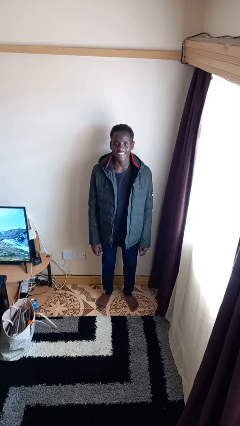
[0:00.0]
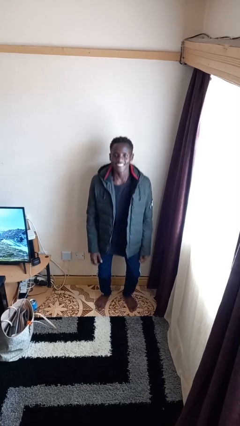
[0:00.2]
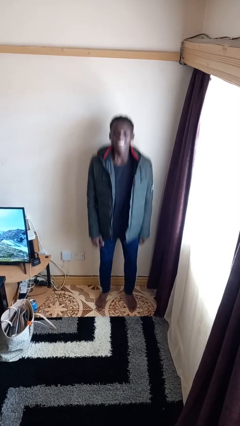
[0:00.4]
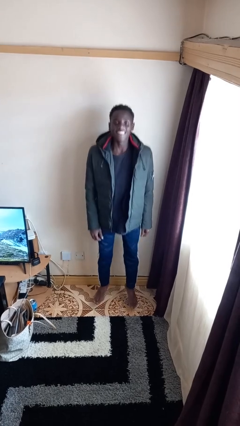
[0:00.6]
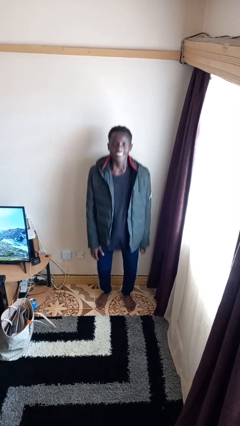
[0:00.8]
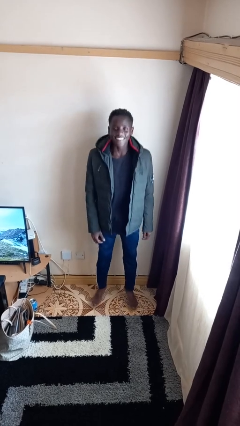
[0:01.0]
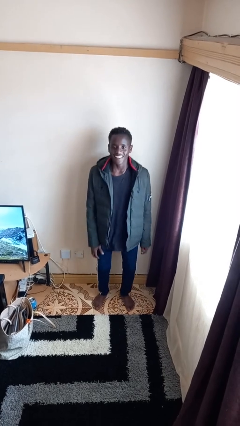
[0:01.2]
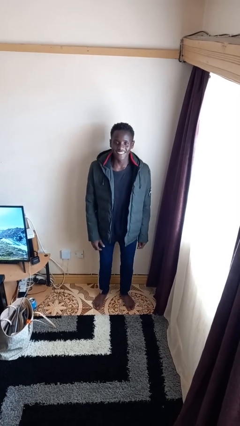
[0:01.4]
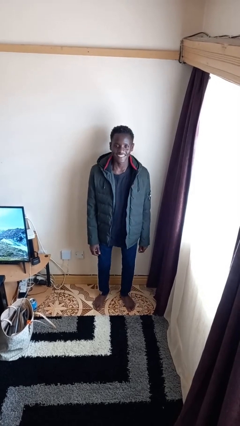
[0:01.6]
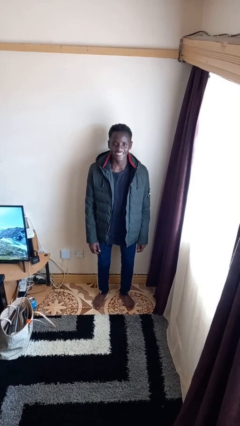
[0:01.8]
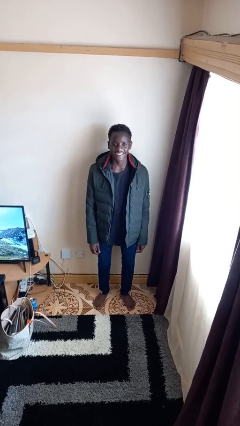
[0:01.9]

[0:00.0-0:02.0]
person jumps

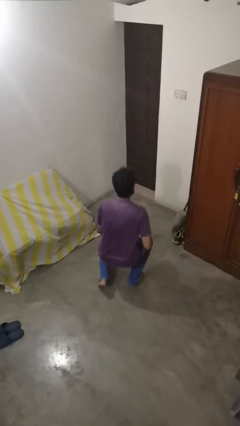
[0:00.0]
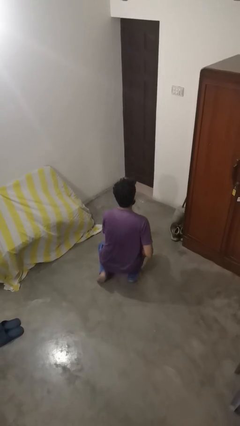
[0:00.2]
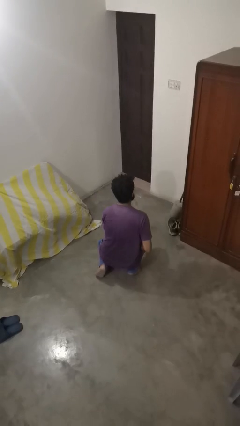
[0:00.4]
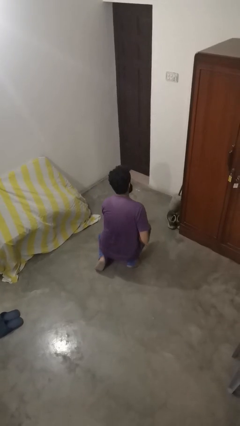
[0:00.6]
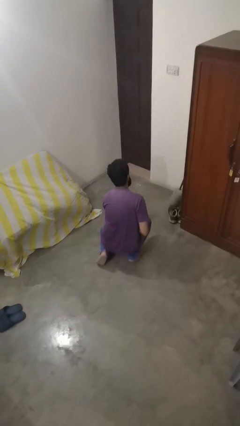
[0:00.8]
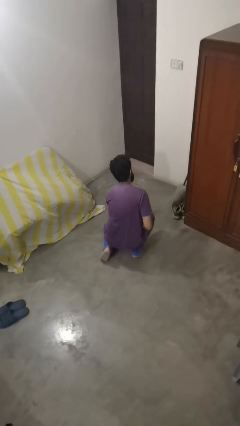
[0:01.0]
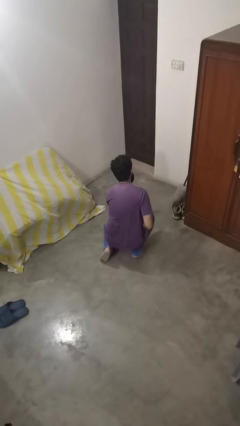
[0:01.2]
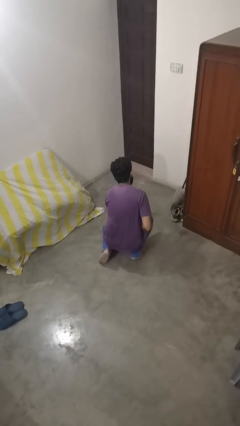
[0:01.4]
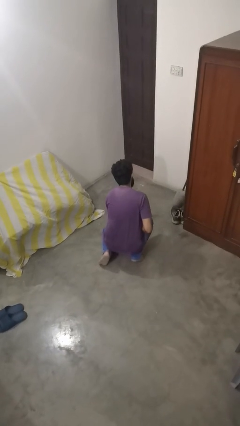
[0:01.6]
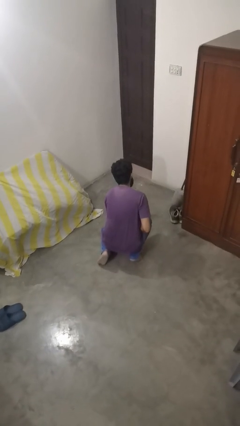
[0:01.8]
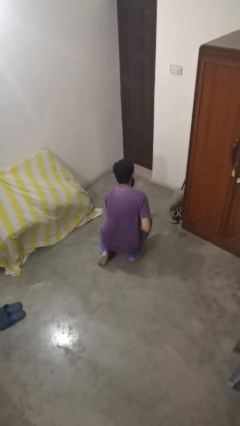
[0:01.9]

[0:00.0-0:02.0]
person kneels

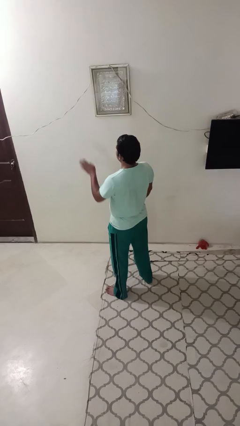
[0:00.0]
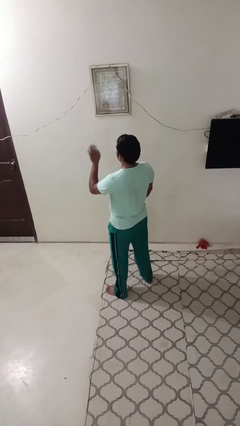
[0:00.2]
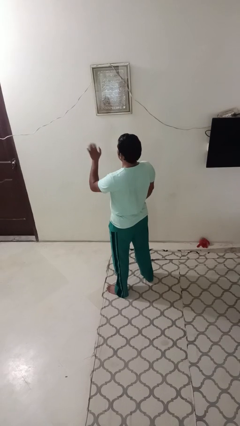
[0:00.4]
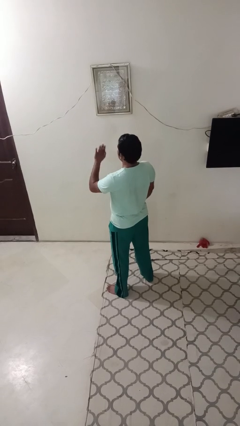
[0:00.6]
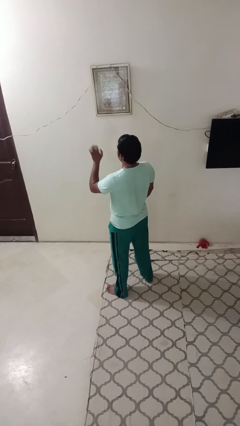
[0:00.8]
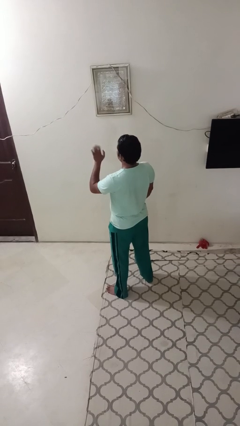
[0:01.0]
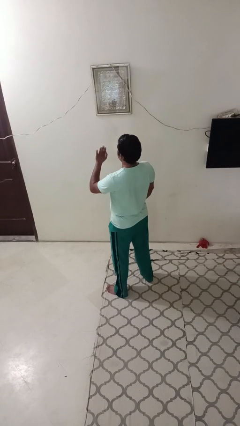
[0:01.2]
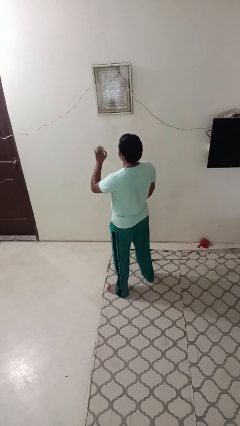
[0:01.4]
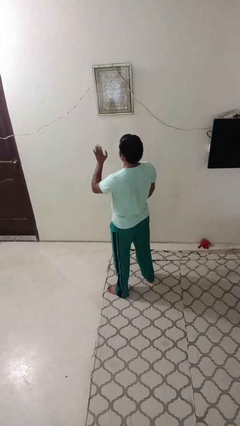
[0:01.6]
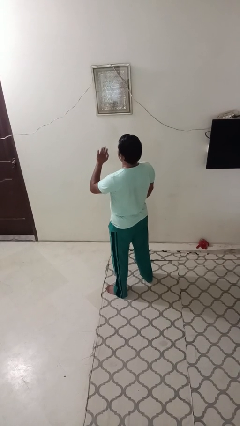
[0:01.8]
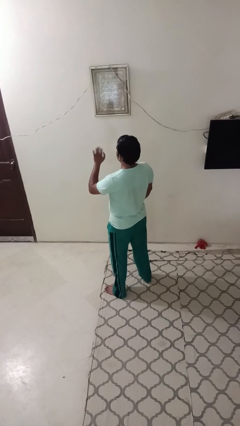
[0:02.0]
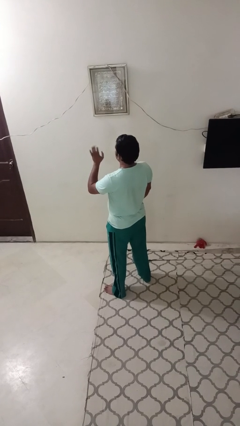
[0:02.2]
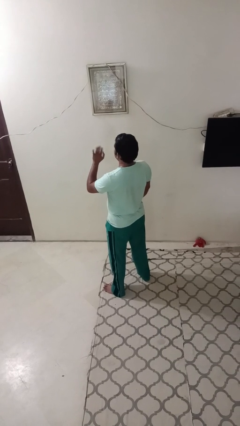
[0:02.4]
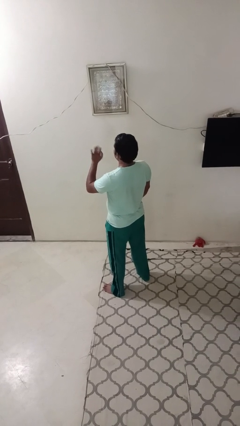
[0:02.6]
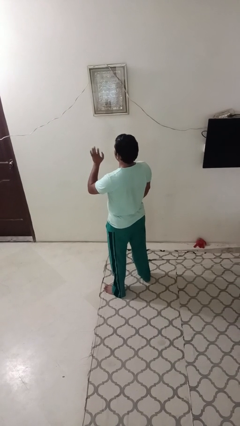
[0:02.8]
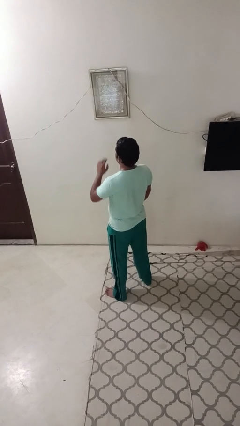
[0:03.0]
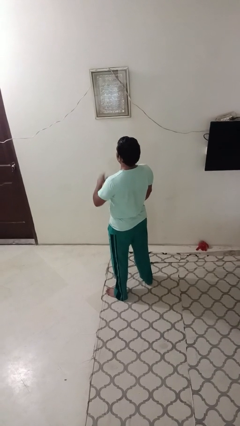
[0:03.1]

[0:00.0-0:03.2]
person waves at person

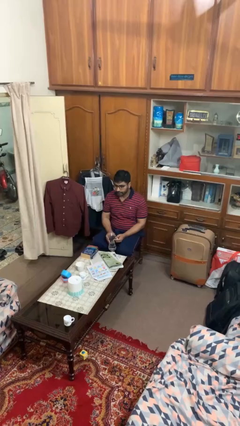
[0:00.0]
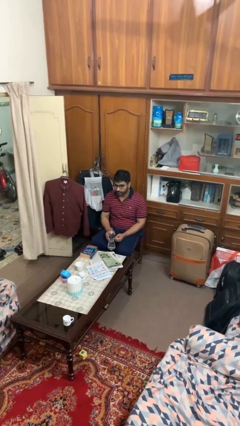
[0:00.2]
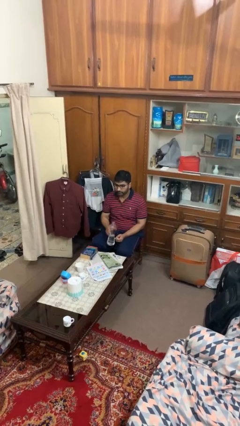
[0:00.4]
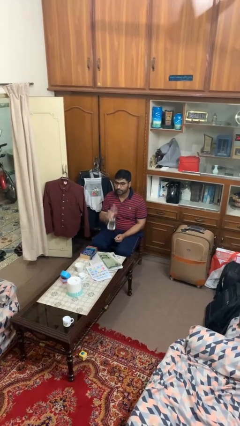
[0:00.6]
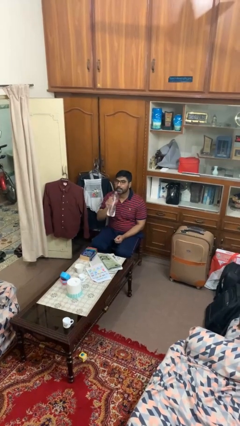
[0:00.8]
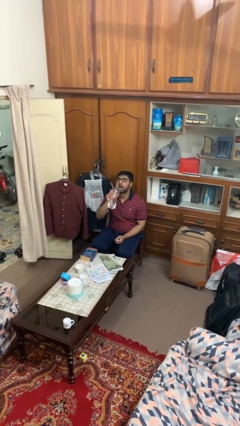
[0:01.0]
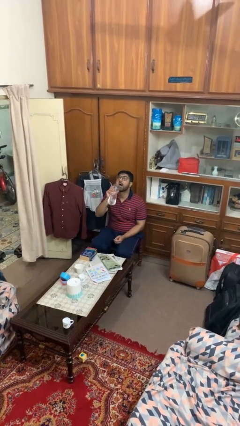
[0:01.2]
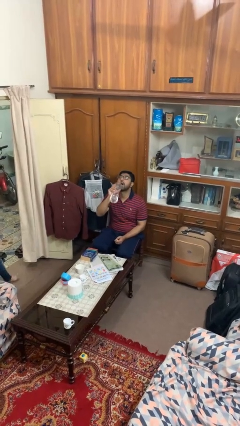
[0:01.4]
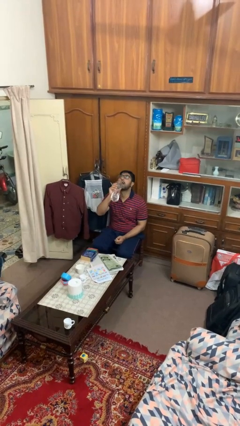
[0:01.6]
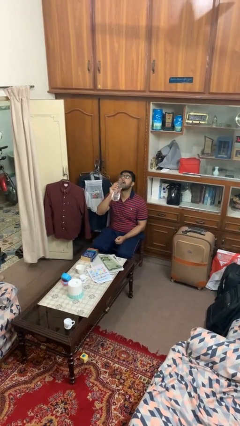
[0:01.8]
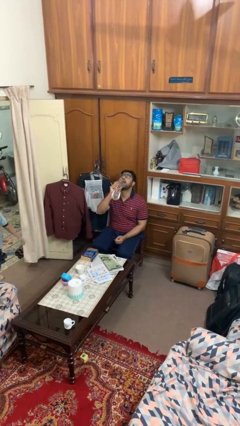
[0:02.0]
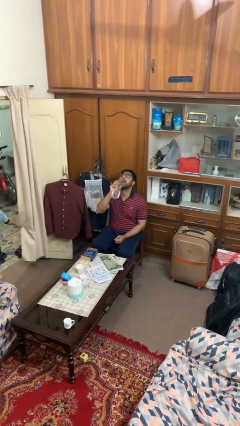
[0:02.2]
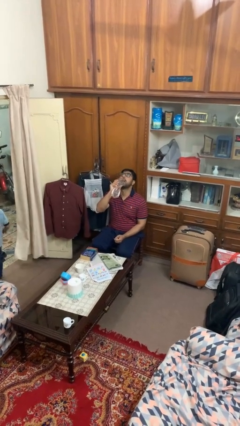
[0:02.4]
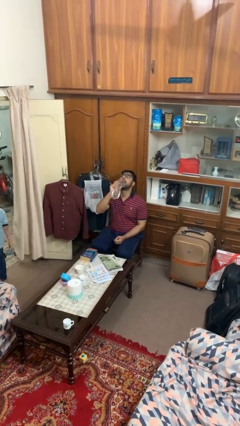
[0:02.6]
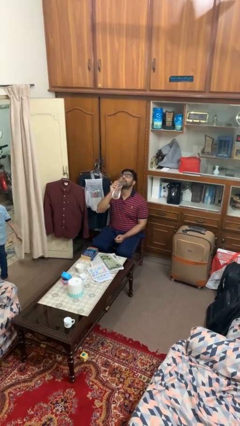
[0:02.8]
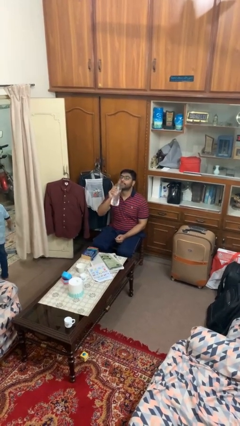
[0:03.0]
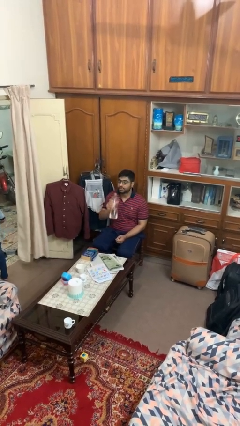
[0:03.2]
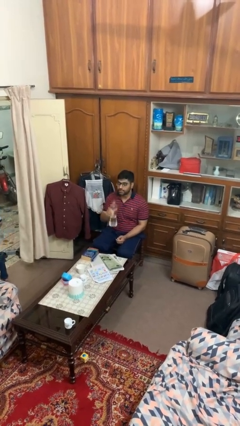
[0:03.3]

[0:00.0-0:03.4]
person drinks from bottle

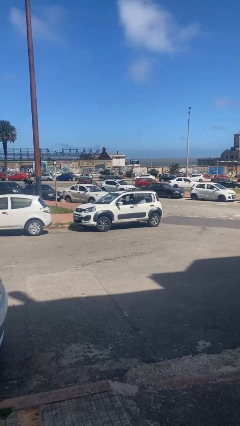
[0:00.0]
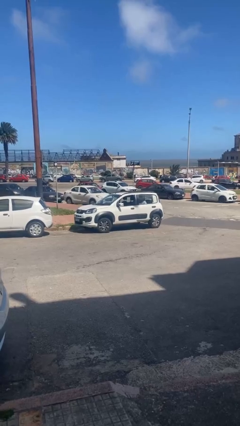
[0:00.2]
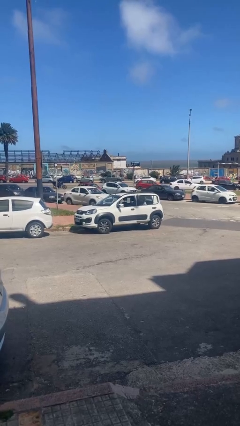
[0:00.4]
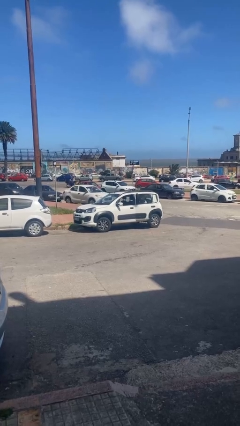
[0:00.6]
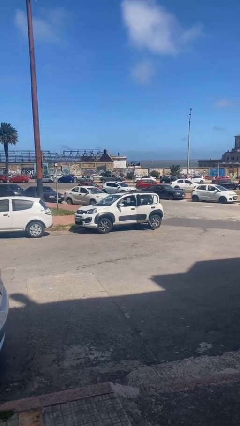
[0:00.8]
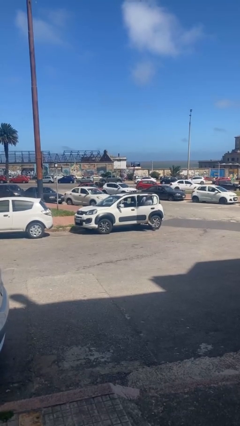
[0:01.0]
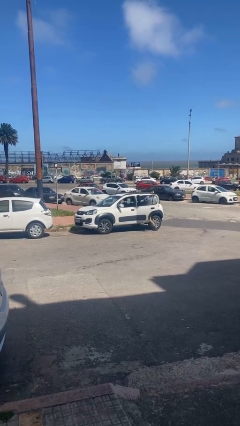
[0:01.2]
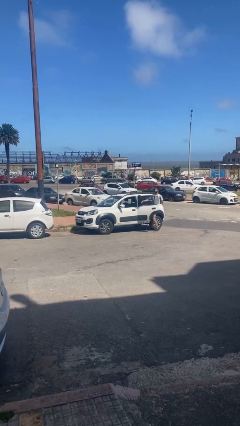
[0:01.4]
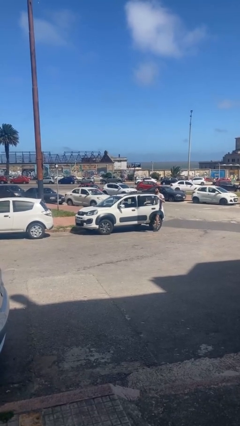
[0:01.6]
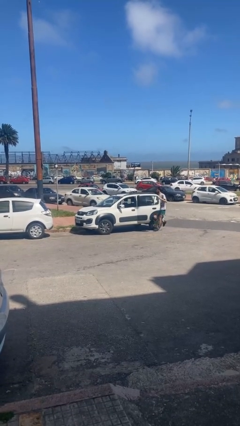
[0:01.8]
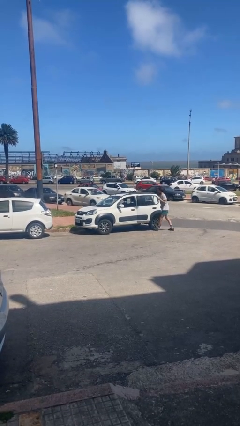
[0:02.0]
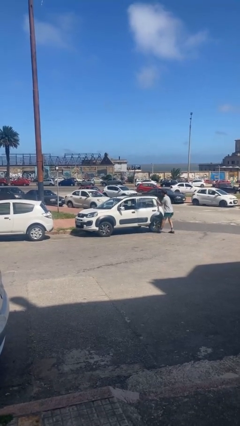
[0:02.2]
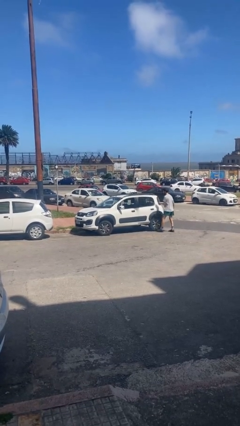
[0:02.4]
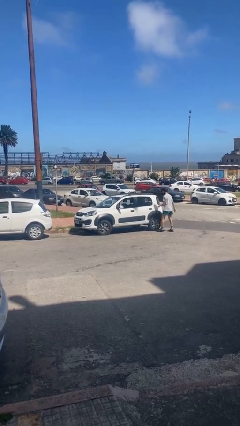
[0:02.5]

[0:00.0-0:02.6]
car drops off person

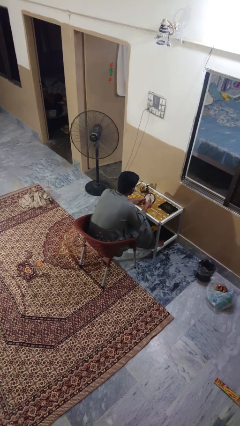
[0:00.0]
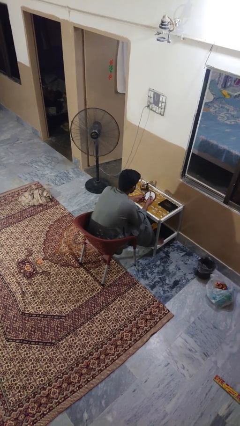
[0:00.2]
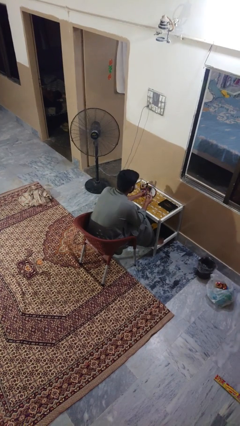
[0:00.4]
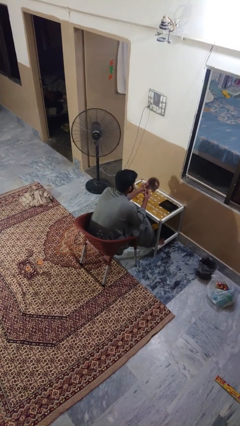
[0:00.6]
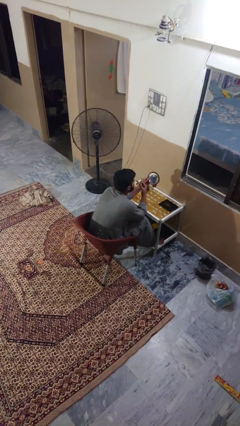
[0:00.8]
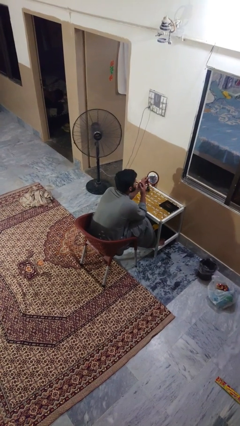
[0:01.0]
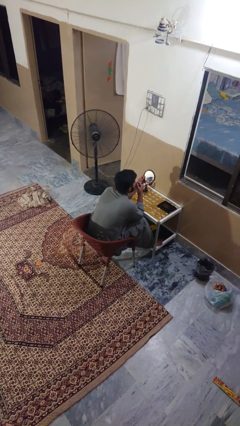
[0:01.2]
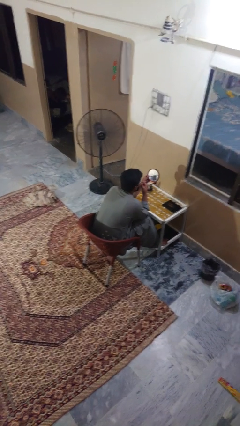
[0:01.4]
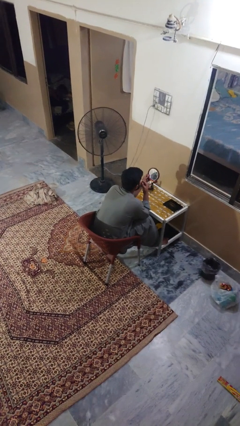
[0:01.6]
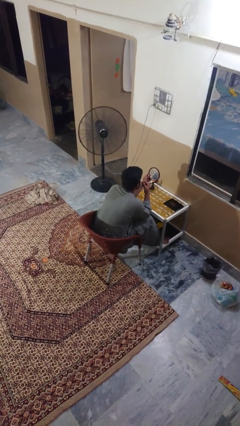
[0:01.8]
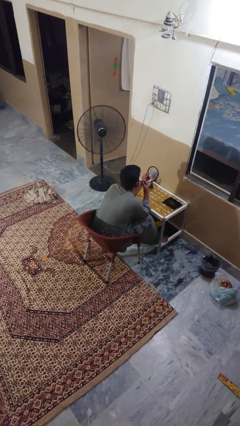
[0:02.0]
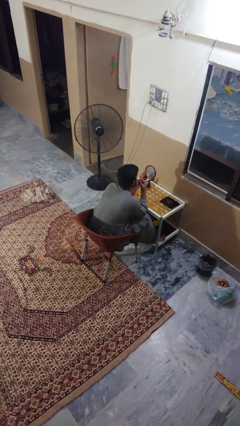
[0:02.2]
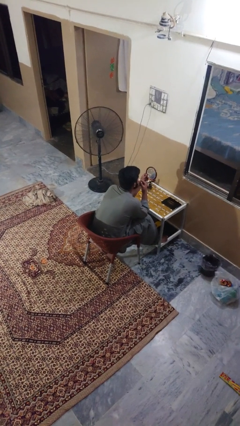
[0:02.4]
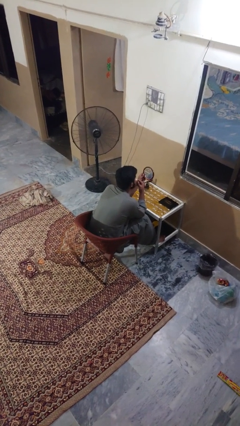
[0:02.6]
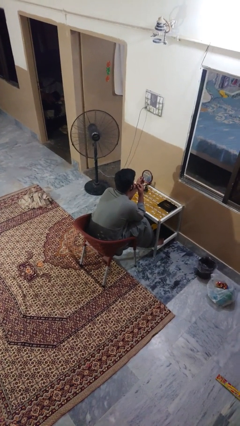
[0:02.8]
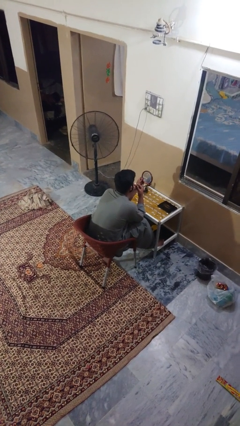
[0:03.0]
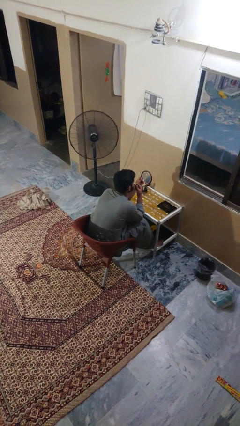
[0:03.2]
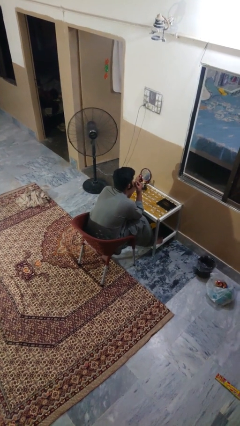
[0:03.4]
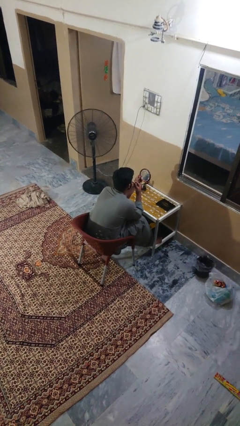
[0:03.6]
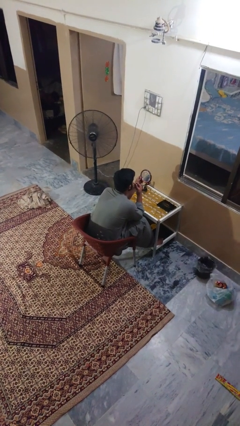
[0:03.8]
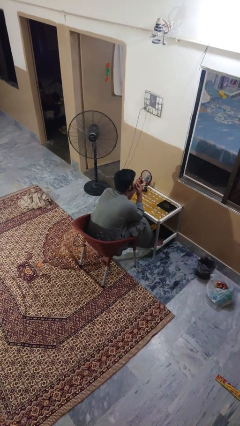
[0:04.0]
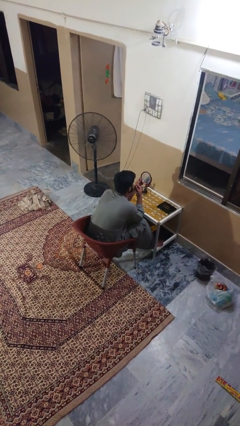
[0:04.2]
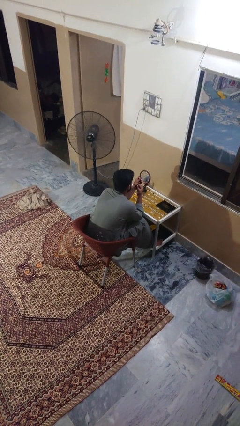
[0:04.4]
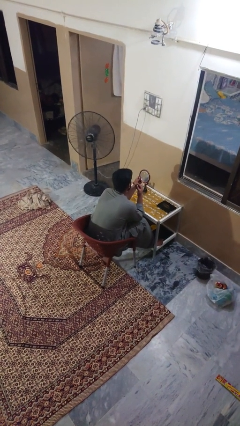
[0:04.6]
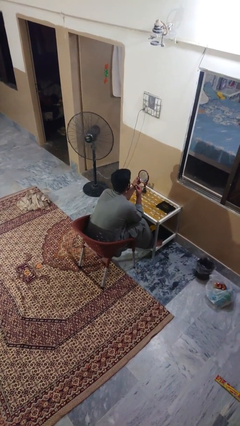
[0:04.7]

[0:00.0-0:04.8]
person applies lip makeup
